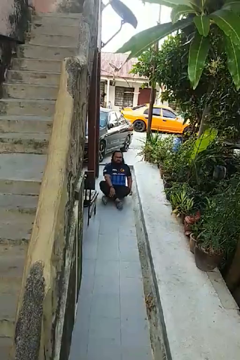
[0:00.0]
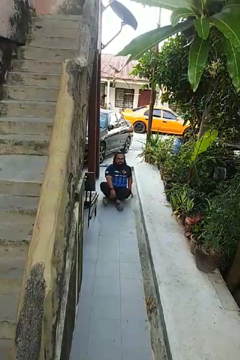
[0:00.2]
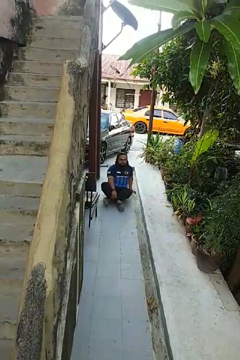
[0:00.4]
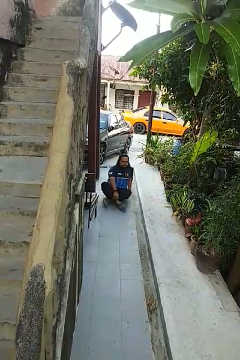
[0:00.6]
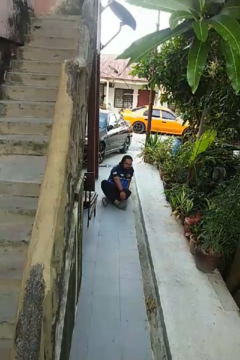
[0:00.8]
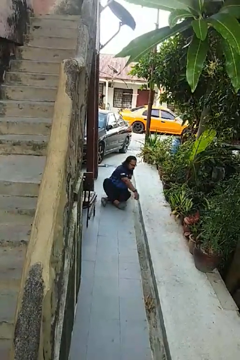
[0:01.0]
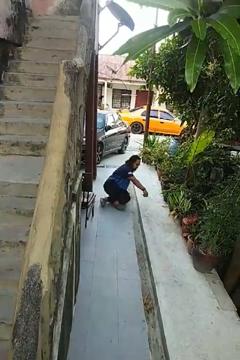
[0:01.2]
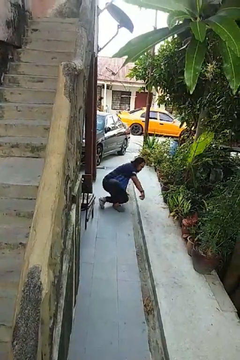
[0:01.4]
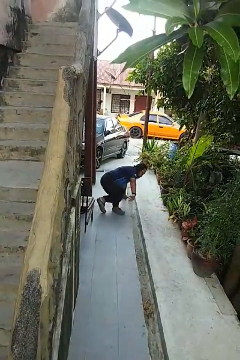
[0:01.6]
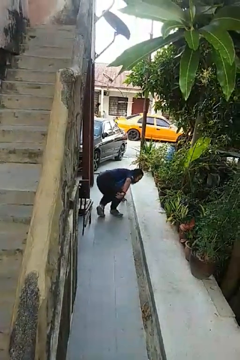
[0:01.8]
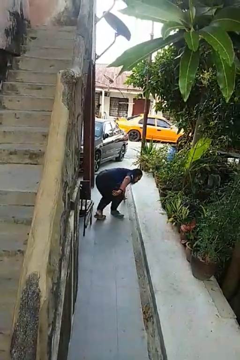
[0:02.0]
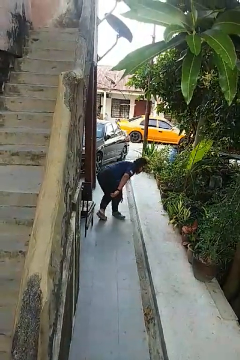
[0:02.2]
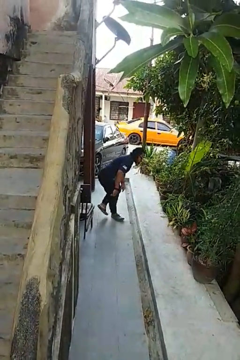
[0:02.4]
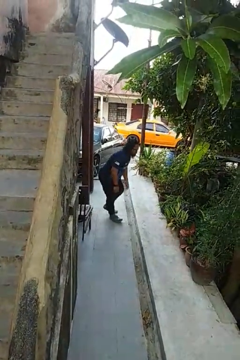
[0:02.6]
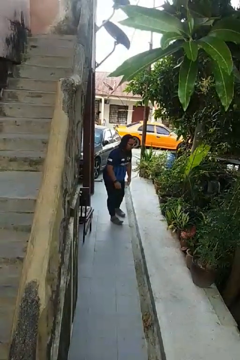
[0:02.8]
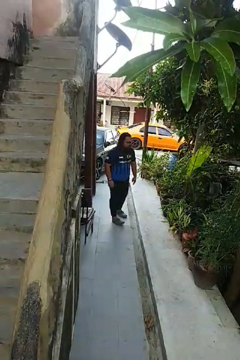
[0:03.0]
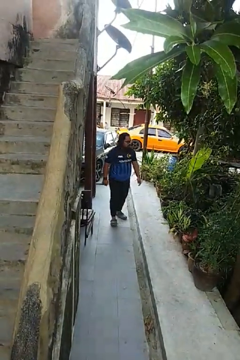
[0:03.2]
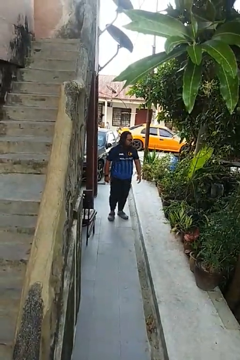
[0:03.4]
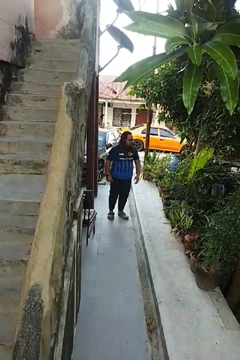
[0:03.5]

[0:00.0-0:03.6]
person stands up from floor

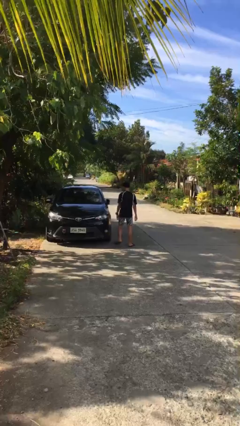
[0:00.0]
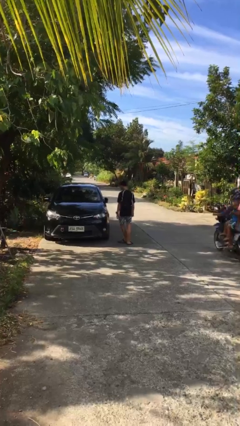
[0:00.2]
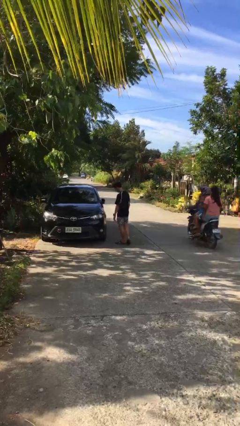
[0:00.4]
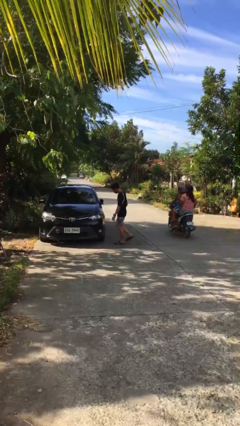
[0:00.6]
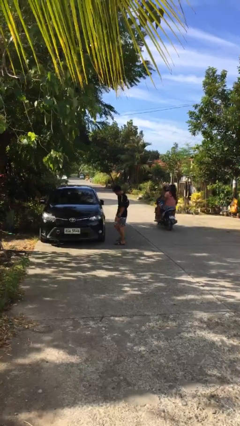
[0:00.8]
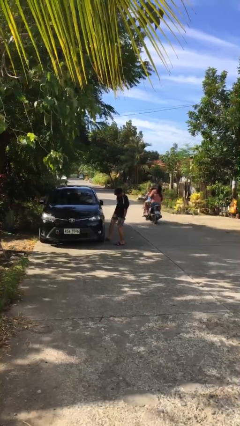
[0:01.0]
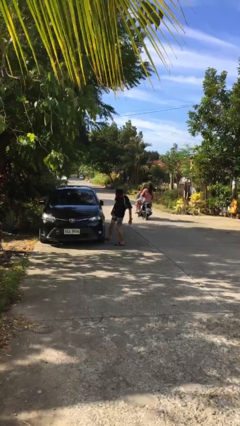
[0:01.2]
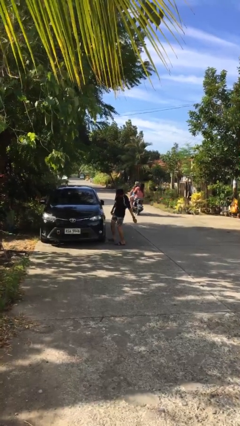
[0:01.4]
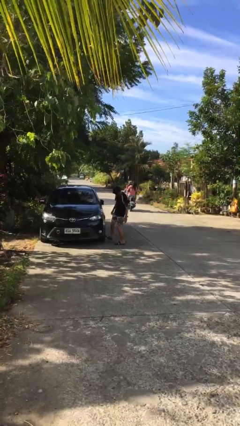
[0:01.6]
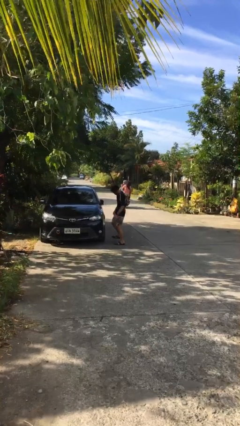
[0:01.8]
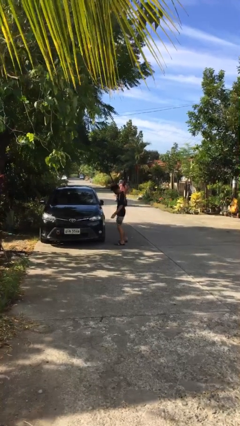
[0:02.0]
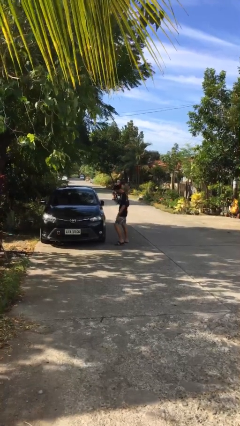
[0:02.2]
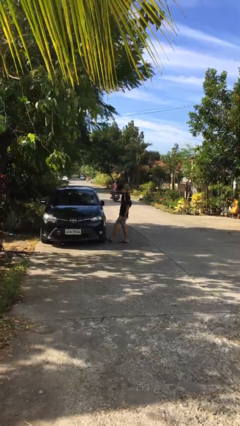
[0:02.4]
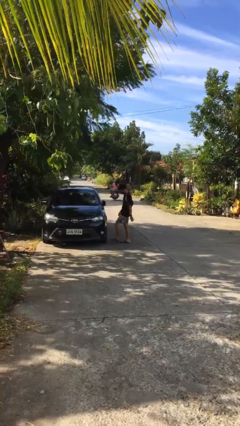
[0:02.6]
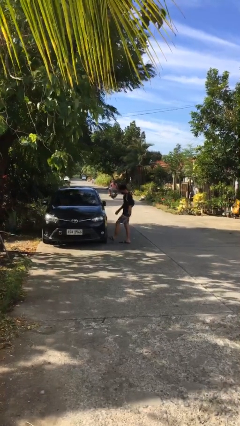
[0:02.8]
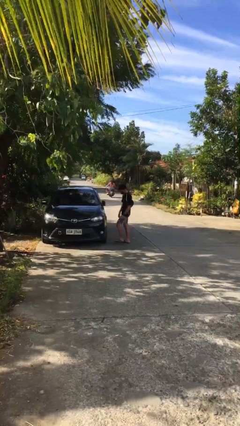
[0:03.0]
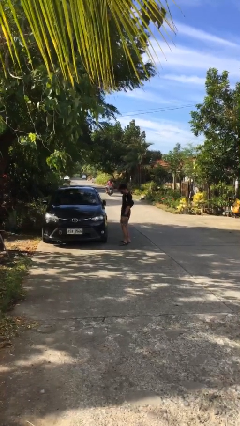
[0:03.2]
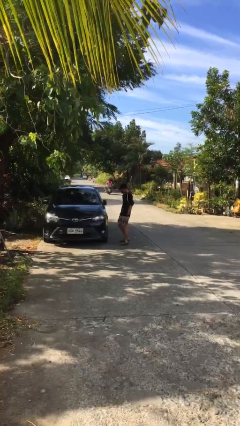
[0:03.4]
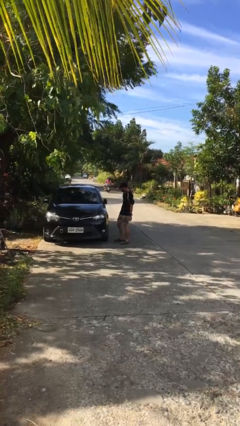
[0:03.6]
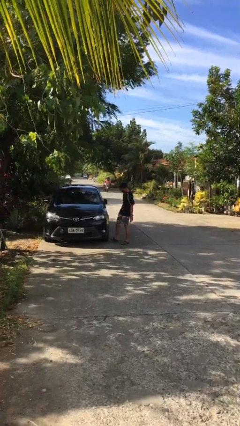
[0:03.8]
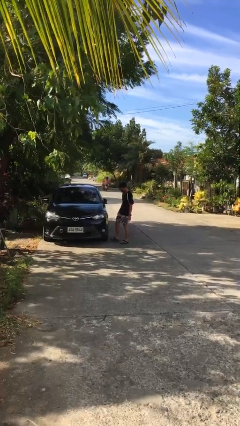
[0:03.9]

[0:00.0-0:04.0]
person kicks car tires

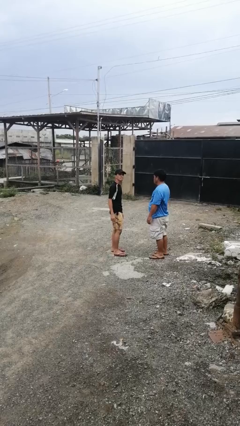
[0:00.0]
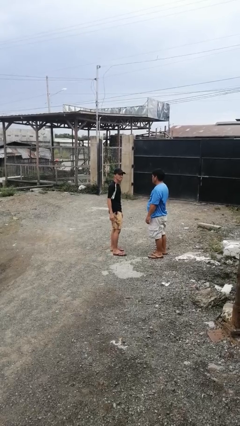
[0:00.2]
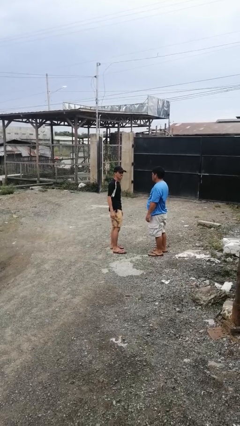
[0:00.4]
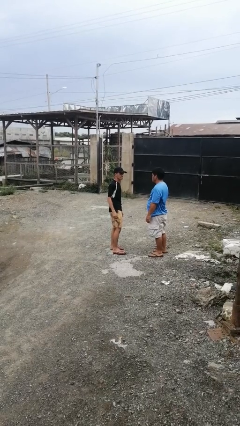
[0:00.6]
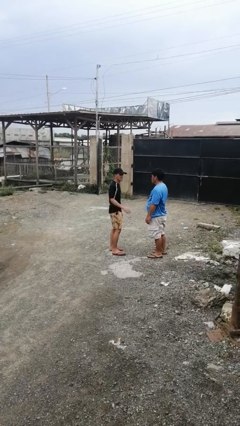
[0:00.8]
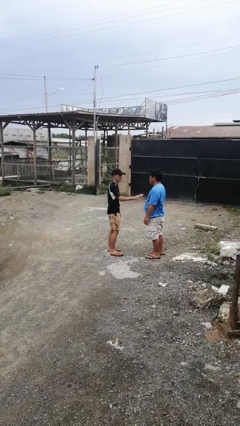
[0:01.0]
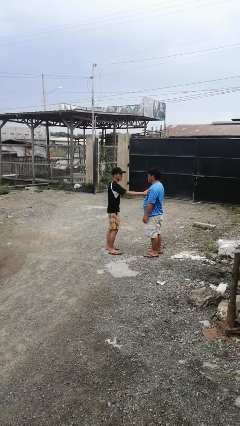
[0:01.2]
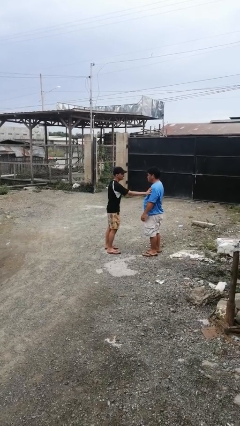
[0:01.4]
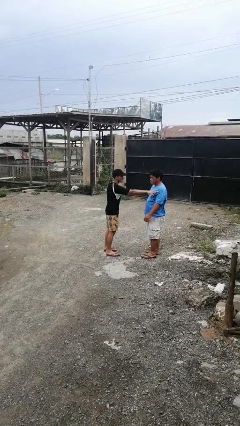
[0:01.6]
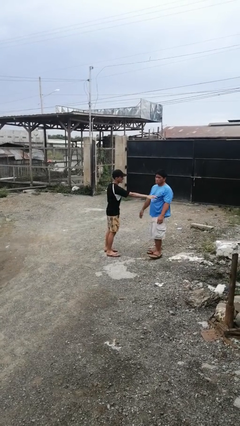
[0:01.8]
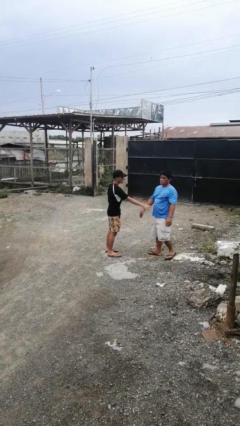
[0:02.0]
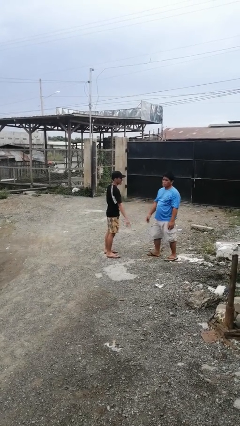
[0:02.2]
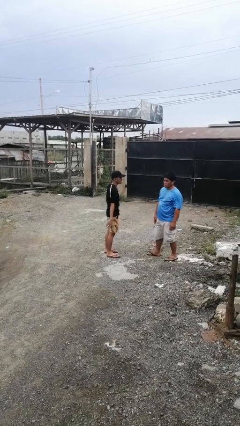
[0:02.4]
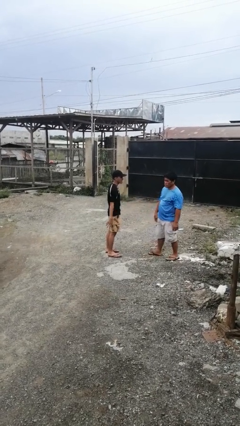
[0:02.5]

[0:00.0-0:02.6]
person shoves person

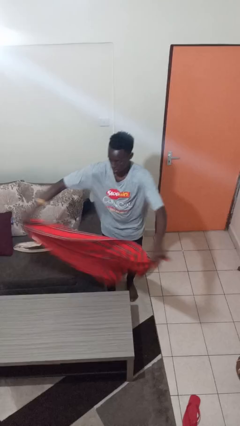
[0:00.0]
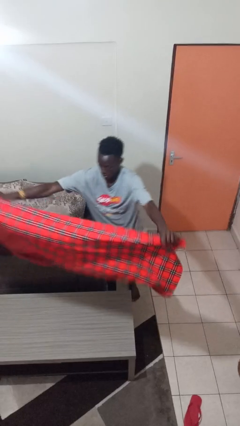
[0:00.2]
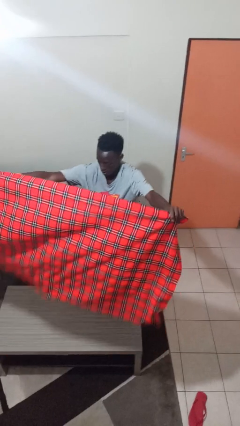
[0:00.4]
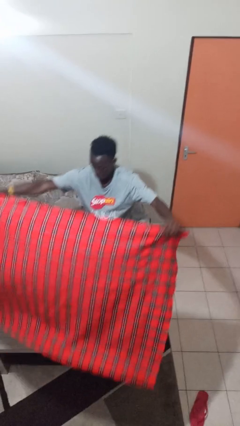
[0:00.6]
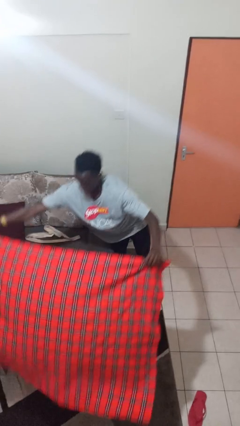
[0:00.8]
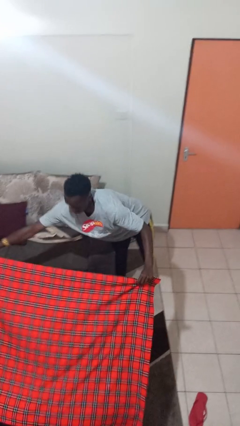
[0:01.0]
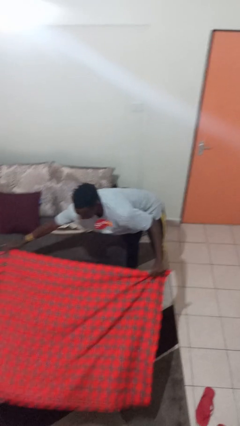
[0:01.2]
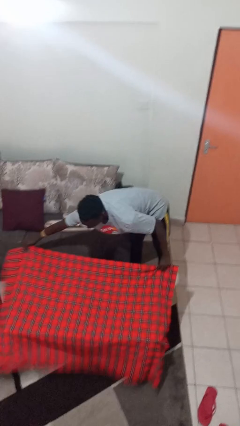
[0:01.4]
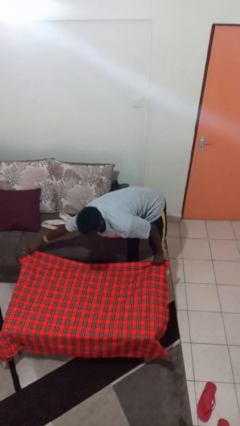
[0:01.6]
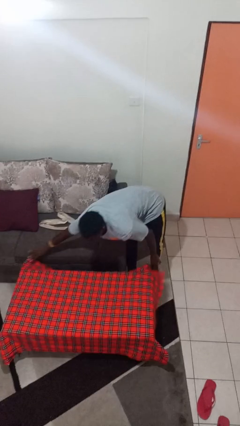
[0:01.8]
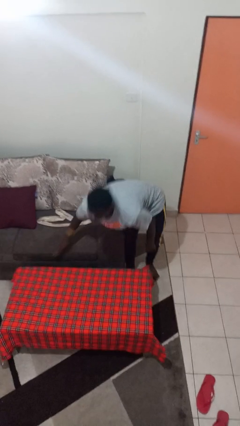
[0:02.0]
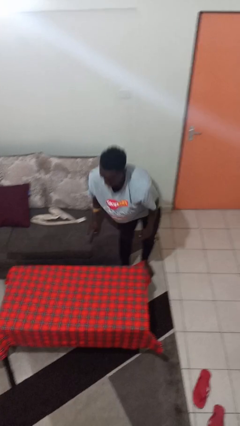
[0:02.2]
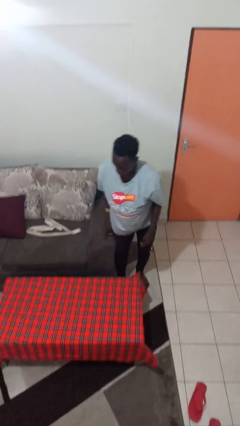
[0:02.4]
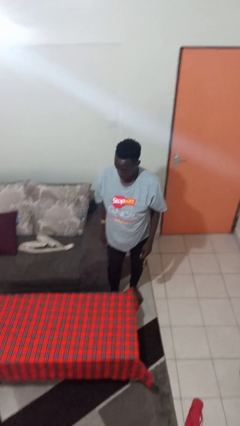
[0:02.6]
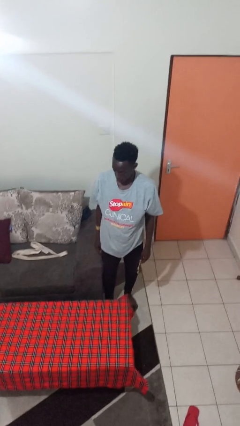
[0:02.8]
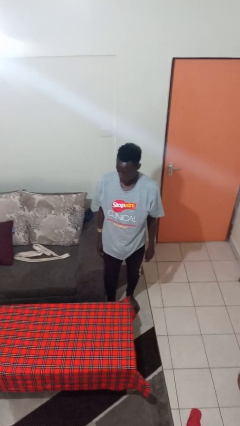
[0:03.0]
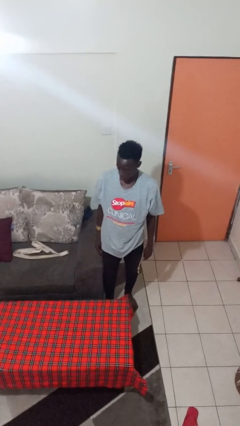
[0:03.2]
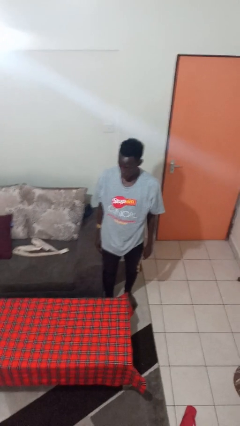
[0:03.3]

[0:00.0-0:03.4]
person spreads tablecloth

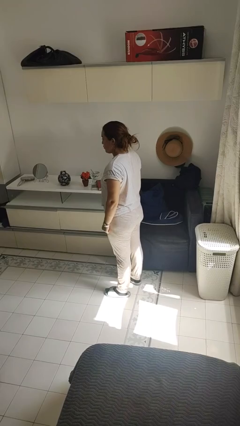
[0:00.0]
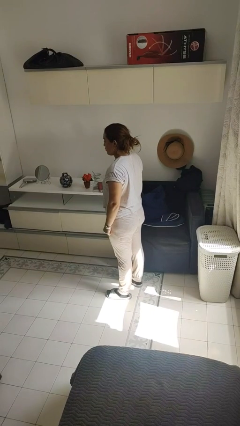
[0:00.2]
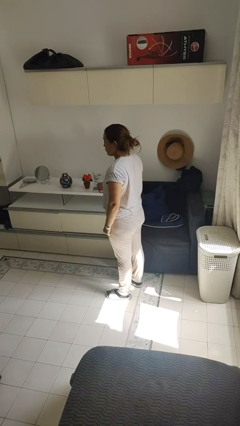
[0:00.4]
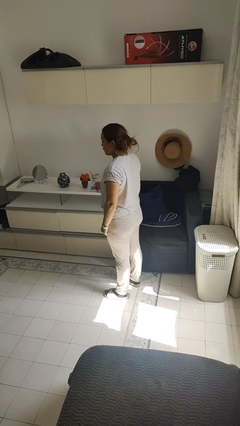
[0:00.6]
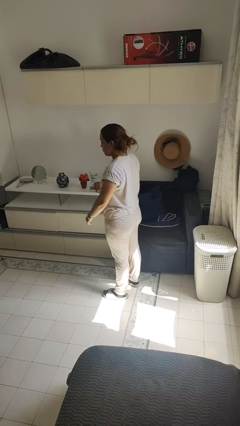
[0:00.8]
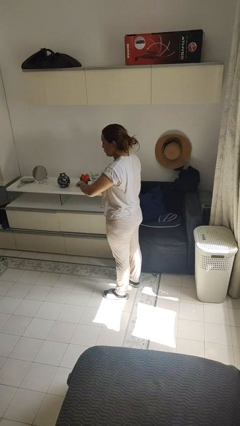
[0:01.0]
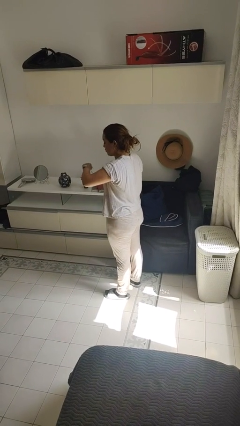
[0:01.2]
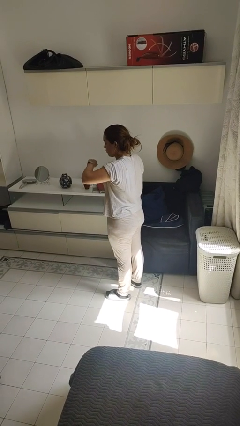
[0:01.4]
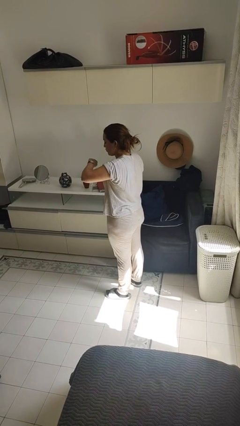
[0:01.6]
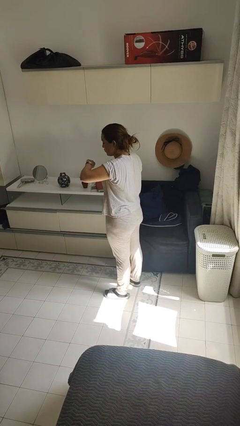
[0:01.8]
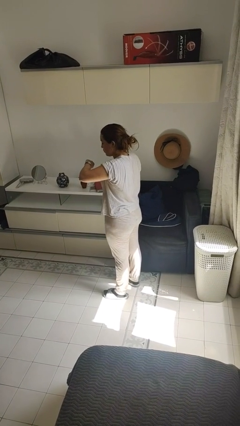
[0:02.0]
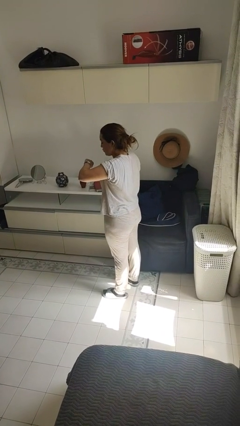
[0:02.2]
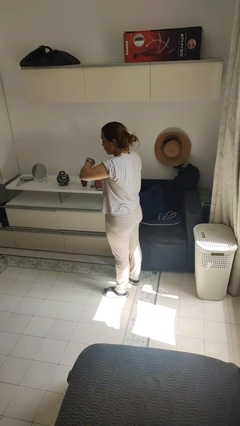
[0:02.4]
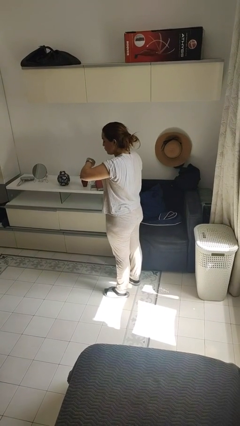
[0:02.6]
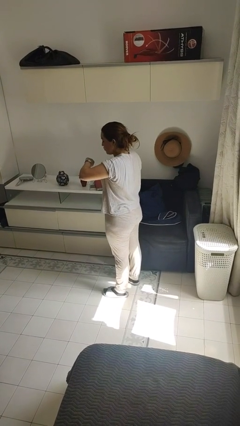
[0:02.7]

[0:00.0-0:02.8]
person looks at wristwatch

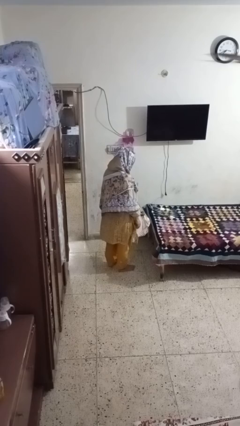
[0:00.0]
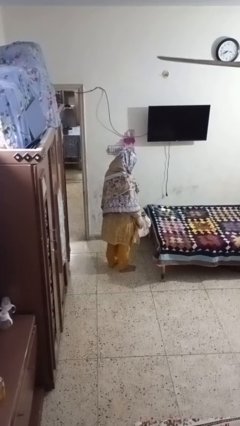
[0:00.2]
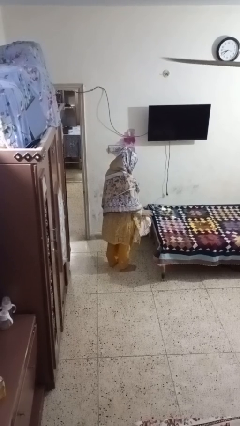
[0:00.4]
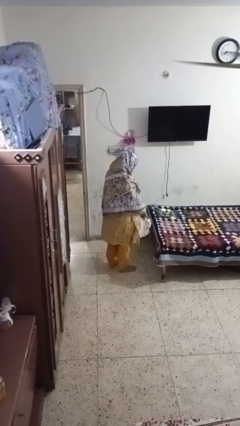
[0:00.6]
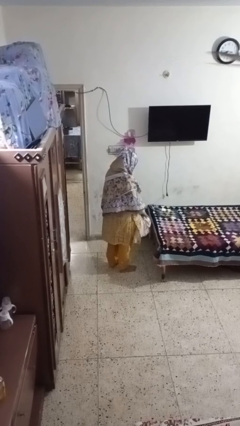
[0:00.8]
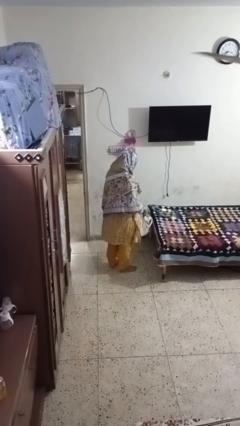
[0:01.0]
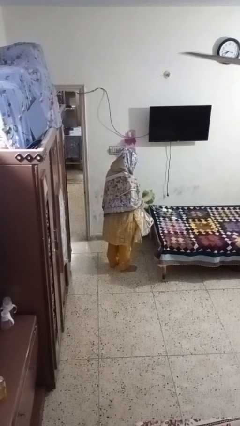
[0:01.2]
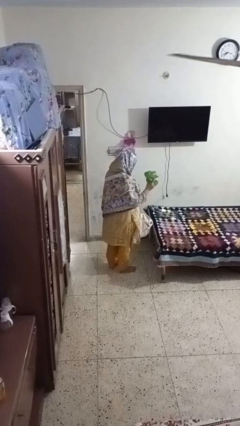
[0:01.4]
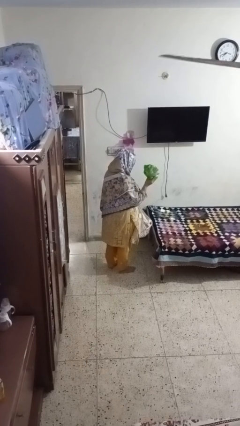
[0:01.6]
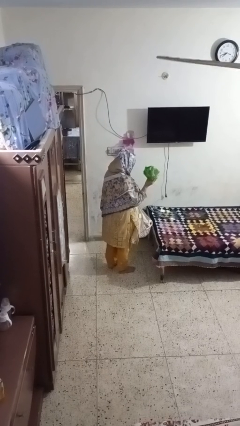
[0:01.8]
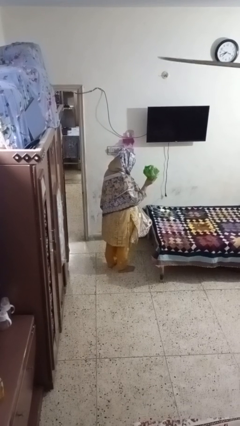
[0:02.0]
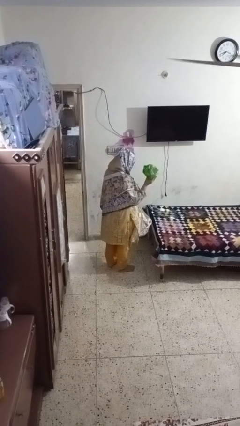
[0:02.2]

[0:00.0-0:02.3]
person takes object from bag
